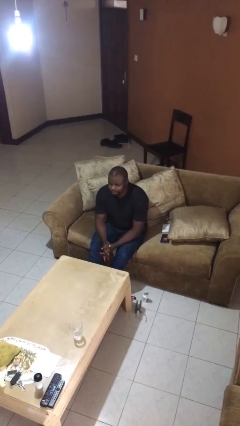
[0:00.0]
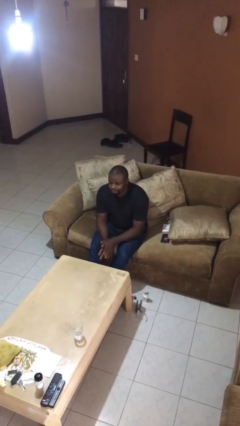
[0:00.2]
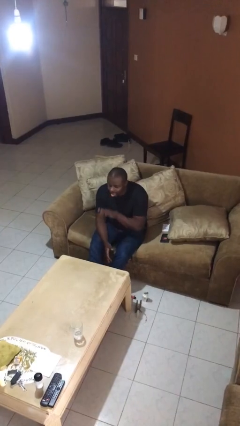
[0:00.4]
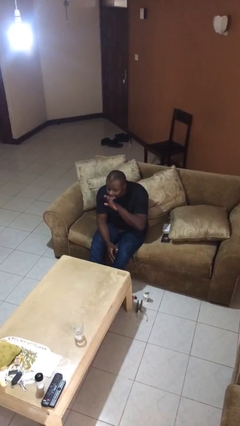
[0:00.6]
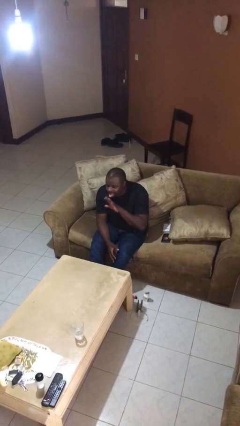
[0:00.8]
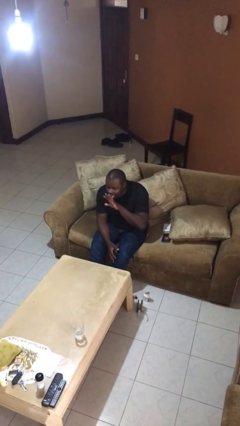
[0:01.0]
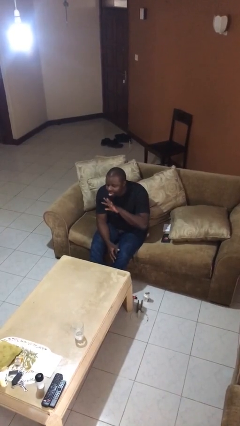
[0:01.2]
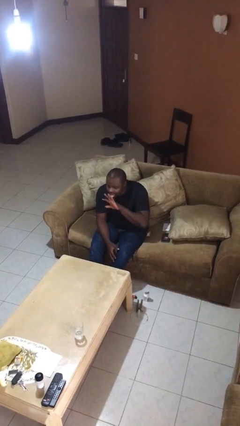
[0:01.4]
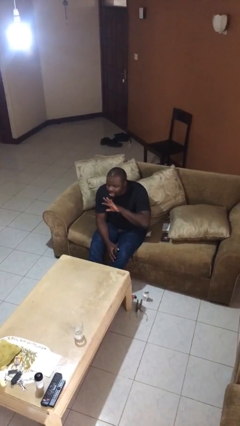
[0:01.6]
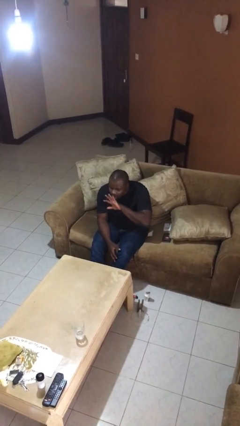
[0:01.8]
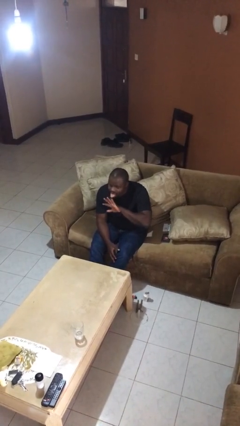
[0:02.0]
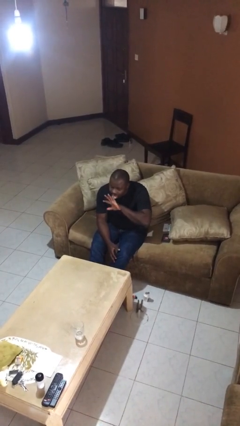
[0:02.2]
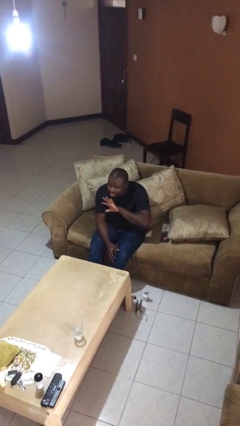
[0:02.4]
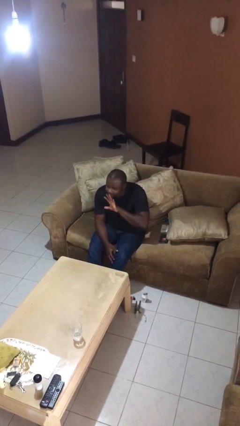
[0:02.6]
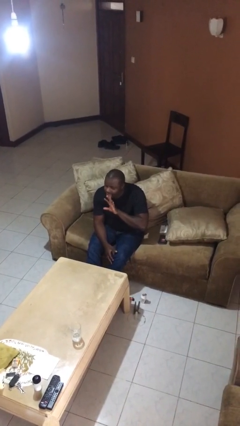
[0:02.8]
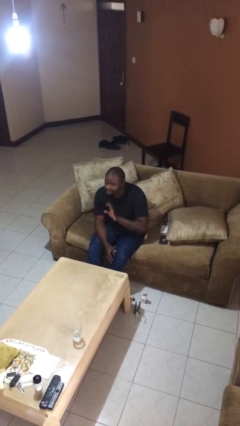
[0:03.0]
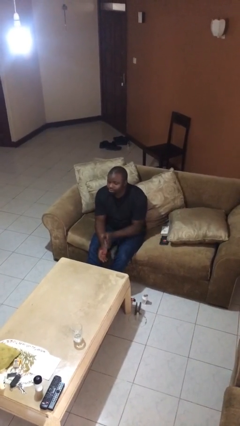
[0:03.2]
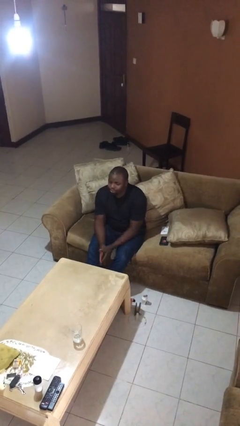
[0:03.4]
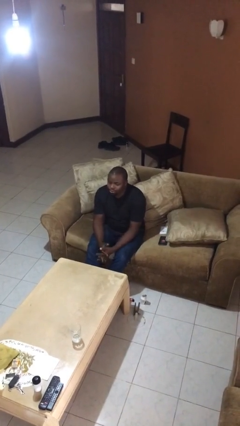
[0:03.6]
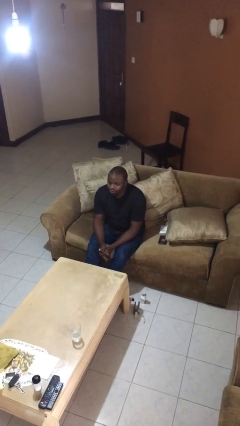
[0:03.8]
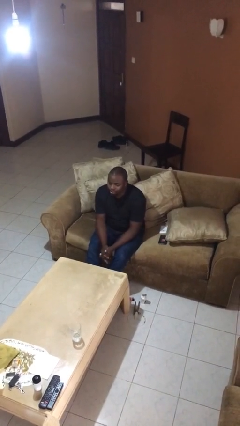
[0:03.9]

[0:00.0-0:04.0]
person licks fingers

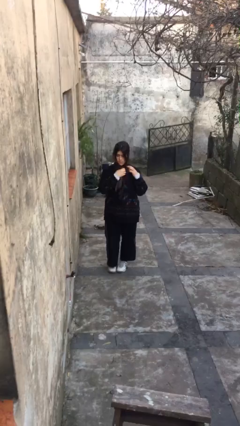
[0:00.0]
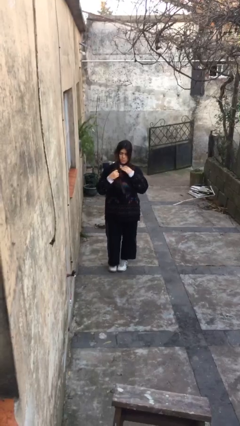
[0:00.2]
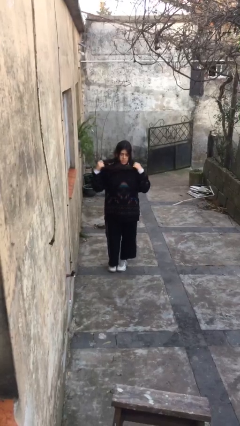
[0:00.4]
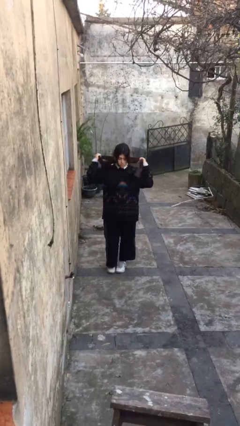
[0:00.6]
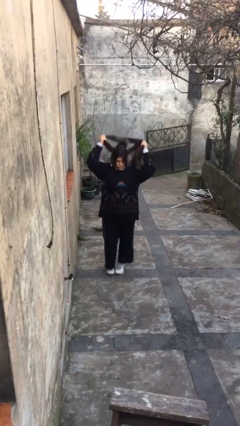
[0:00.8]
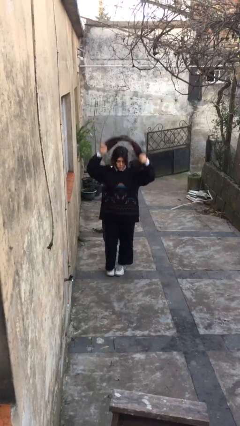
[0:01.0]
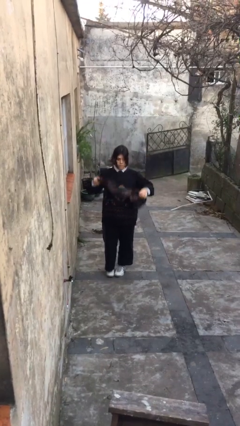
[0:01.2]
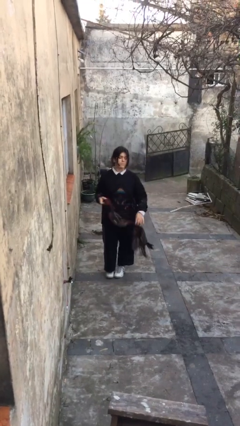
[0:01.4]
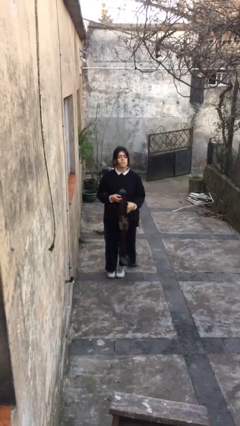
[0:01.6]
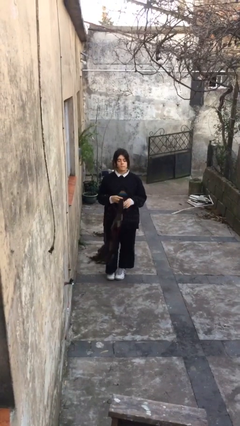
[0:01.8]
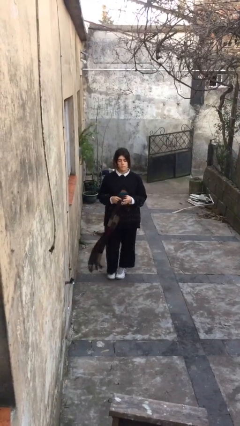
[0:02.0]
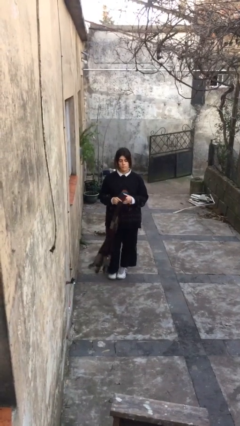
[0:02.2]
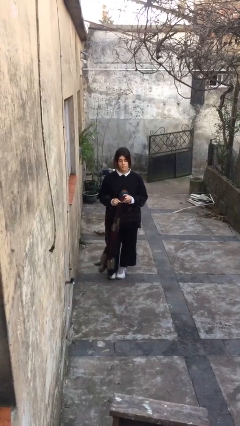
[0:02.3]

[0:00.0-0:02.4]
person takes off scarf

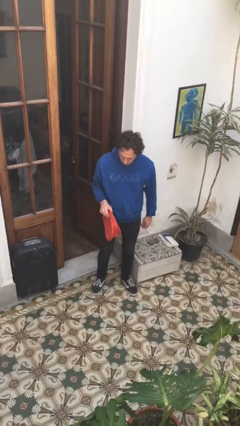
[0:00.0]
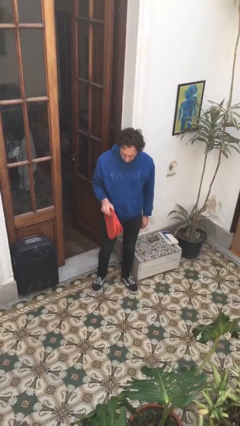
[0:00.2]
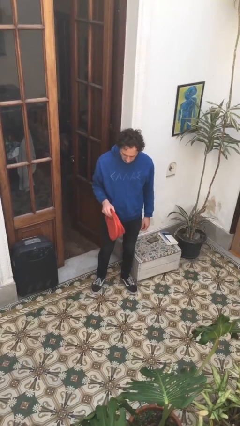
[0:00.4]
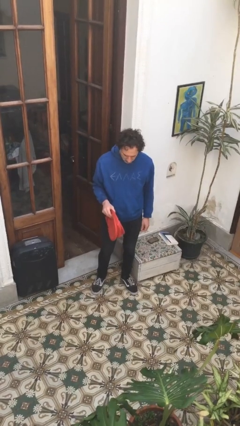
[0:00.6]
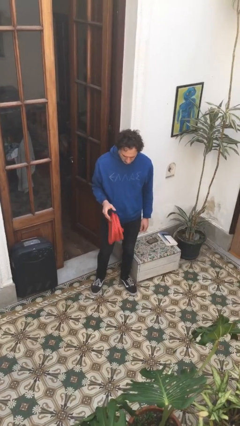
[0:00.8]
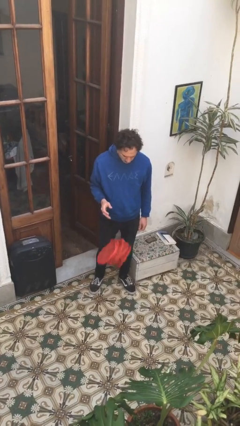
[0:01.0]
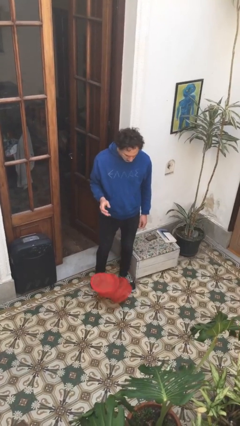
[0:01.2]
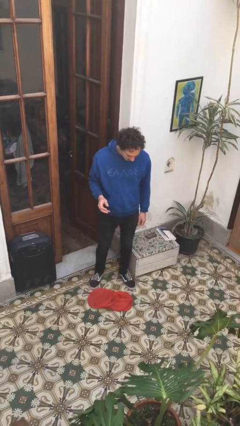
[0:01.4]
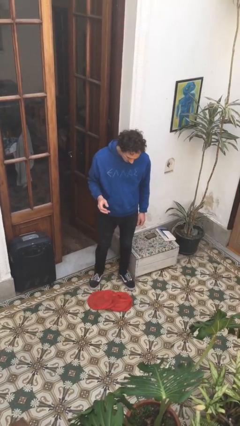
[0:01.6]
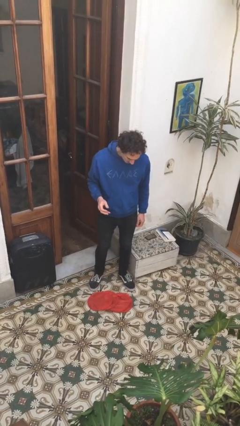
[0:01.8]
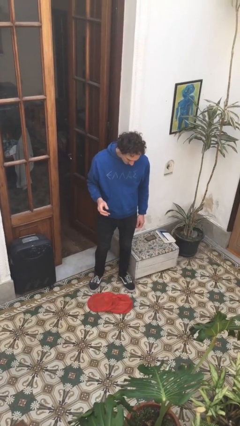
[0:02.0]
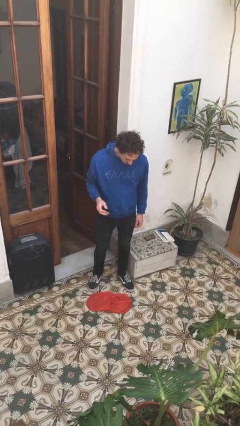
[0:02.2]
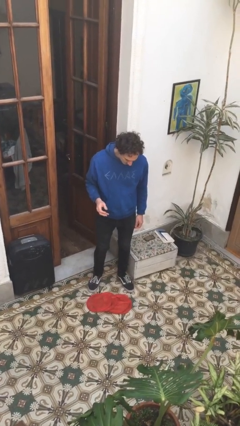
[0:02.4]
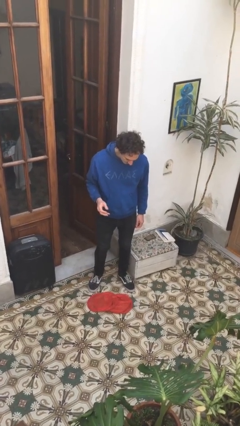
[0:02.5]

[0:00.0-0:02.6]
person drops object

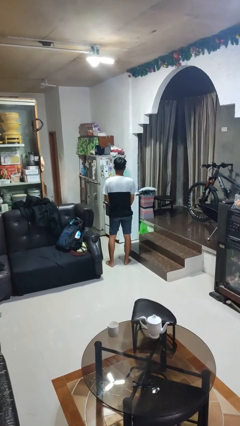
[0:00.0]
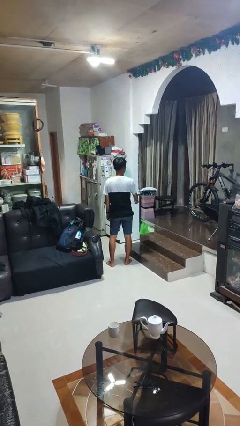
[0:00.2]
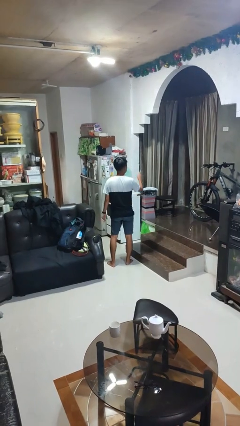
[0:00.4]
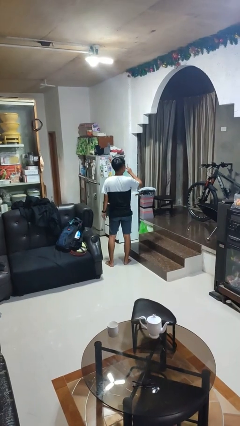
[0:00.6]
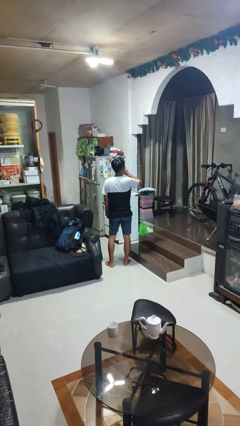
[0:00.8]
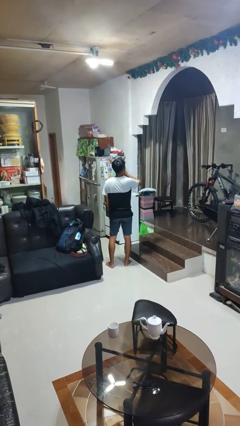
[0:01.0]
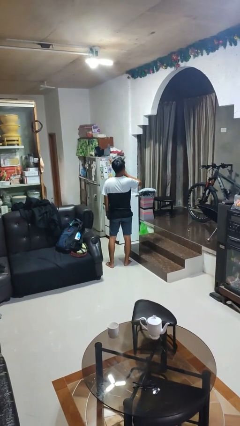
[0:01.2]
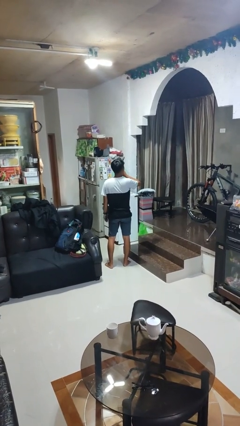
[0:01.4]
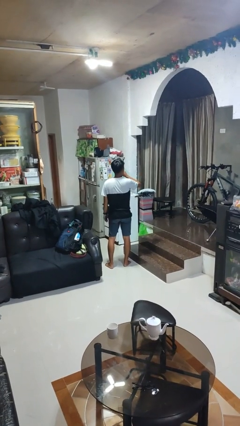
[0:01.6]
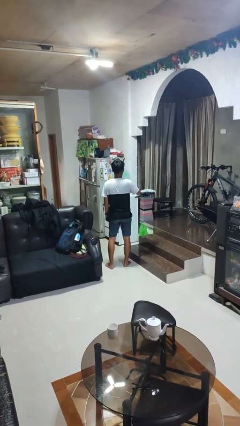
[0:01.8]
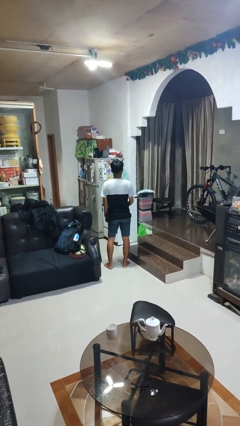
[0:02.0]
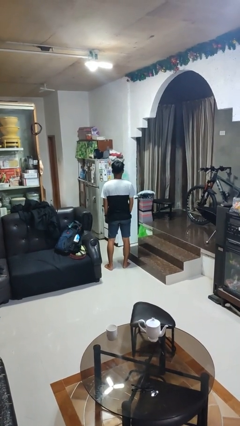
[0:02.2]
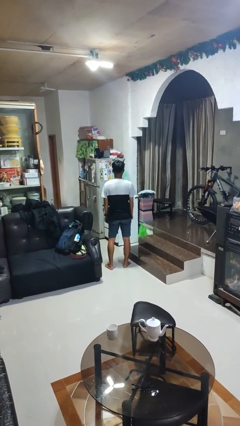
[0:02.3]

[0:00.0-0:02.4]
person gestures behind me

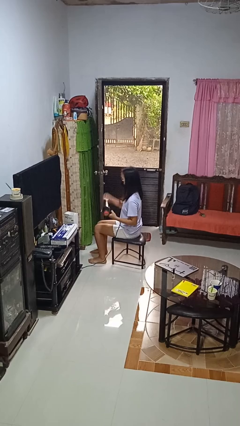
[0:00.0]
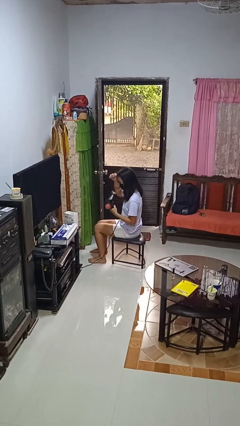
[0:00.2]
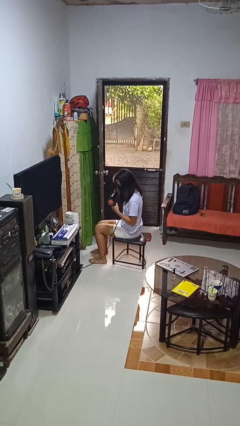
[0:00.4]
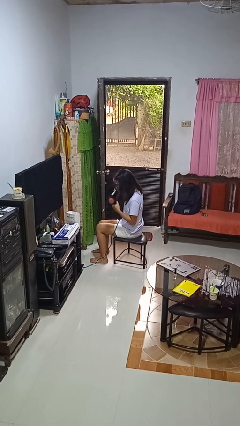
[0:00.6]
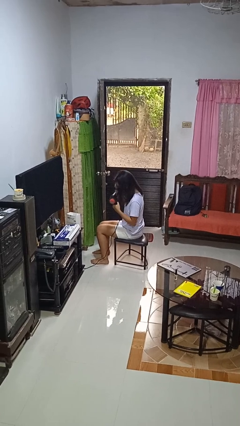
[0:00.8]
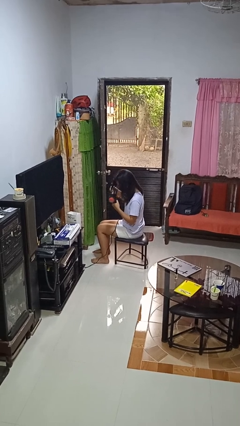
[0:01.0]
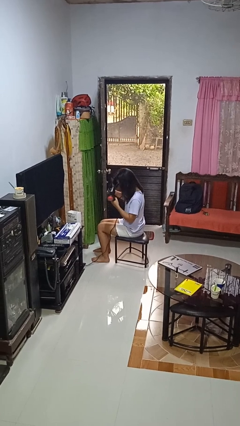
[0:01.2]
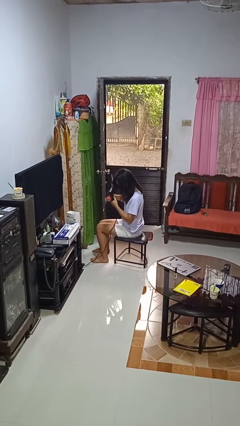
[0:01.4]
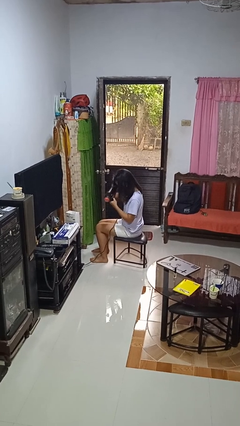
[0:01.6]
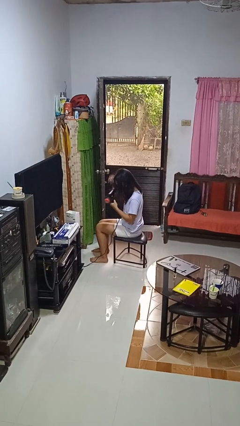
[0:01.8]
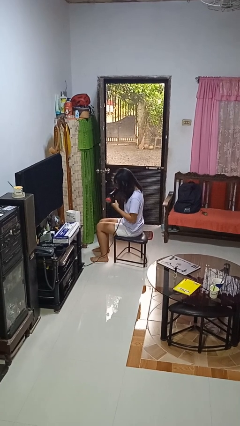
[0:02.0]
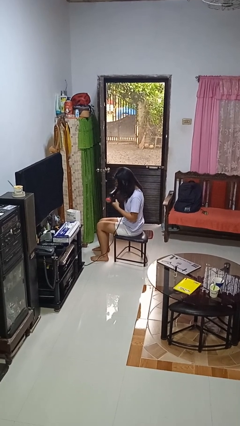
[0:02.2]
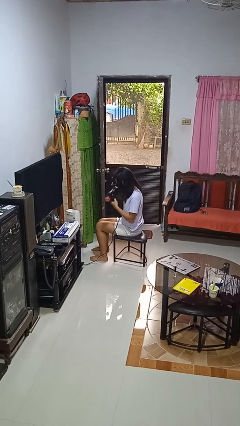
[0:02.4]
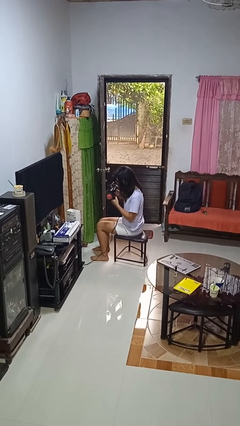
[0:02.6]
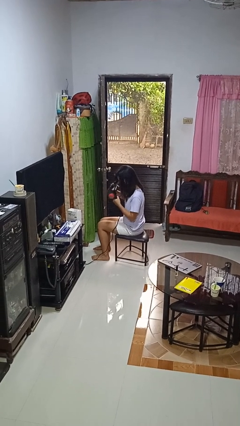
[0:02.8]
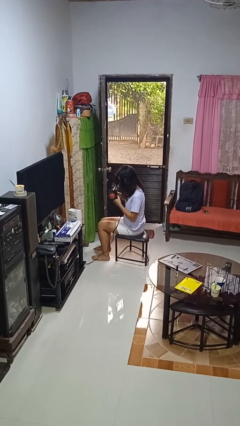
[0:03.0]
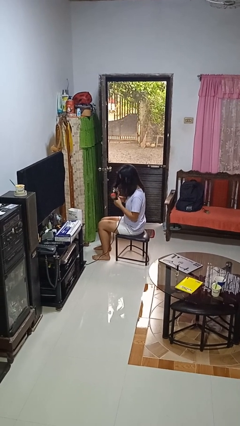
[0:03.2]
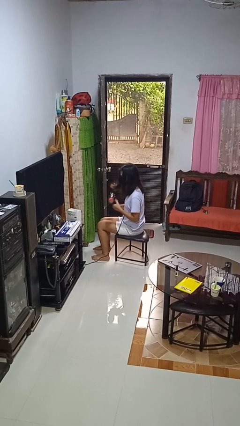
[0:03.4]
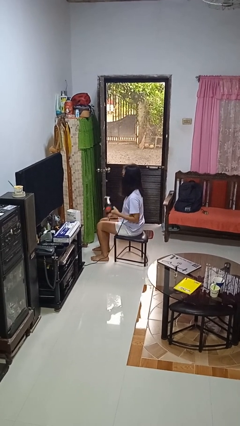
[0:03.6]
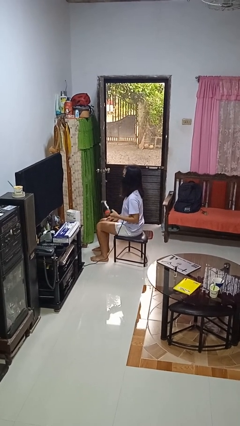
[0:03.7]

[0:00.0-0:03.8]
person dries hair with hairdryer

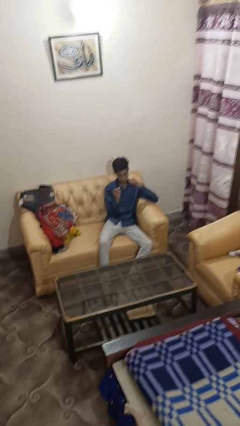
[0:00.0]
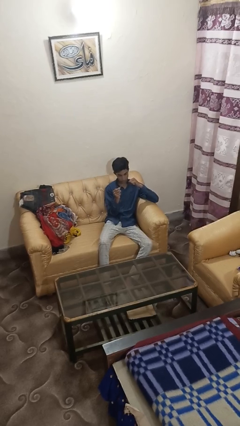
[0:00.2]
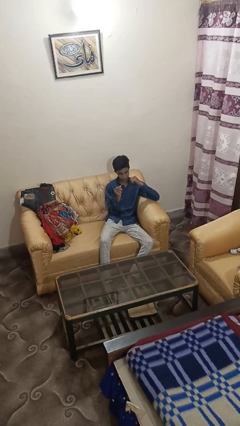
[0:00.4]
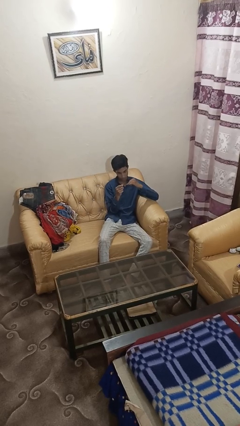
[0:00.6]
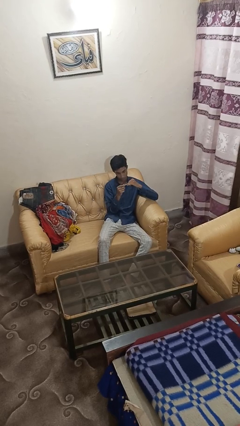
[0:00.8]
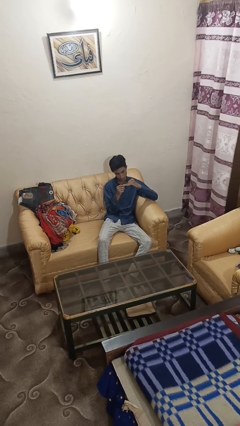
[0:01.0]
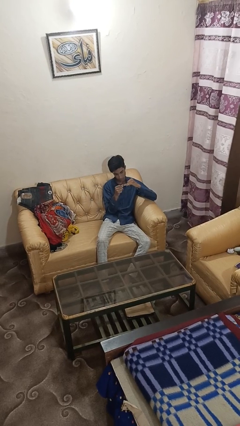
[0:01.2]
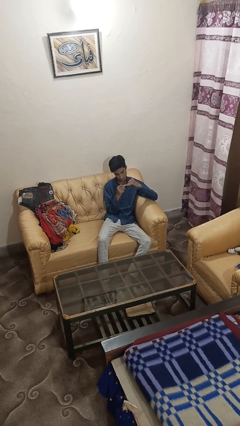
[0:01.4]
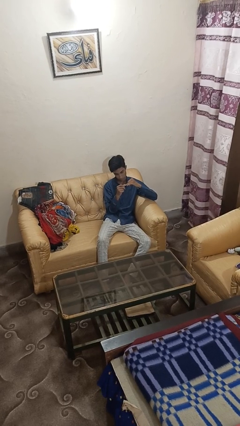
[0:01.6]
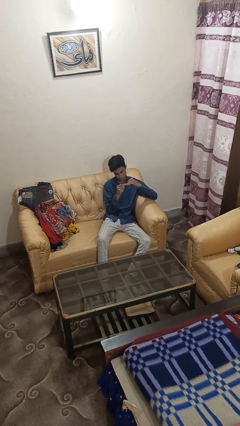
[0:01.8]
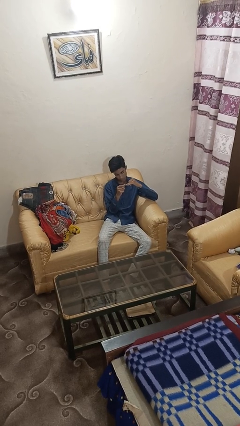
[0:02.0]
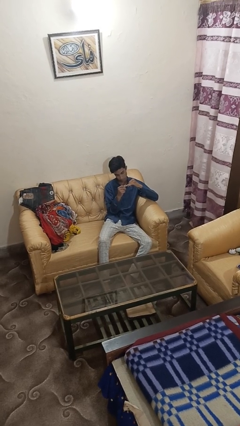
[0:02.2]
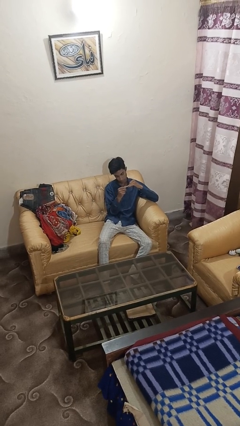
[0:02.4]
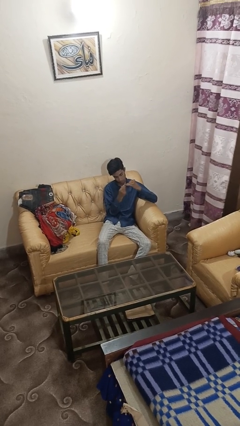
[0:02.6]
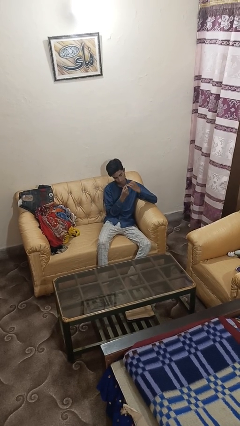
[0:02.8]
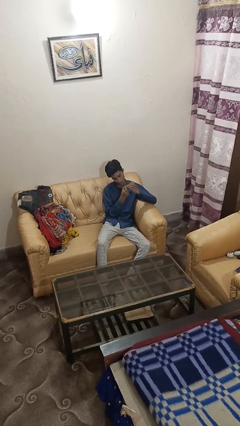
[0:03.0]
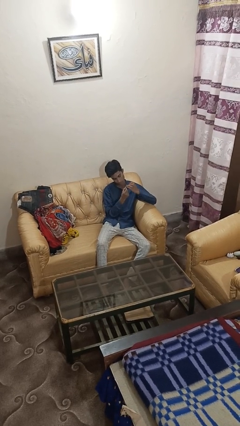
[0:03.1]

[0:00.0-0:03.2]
person files fingernails
